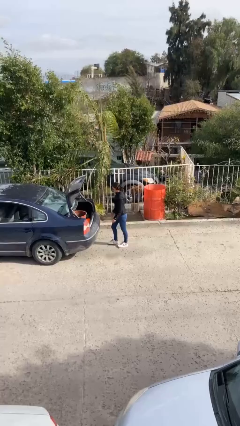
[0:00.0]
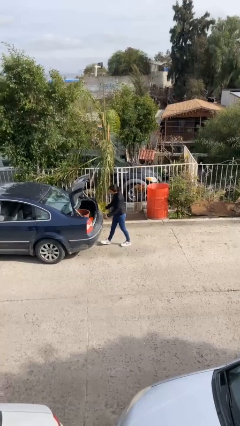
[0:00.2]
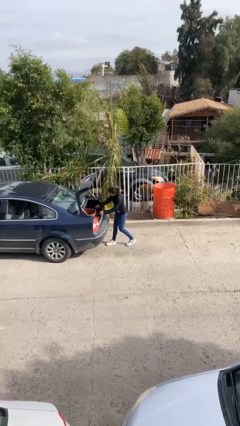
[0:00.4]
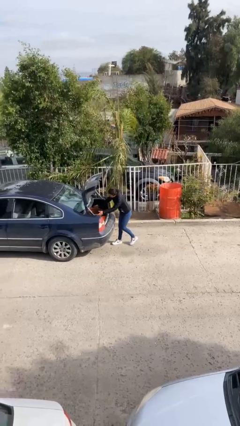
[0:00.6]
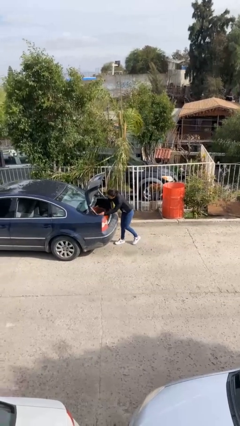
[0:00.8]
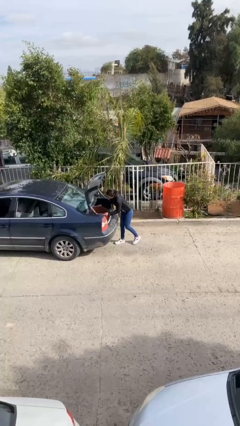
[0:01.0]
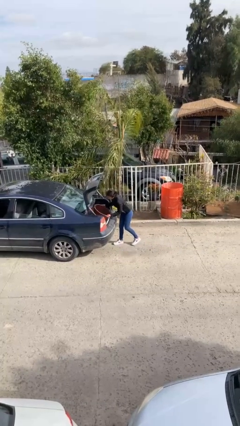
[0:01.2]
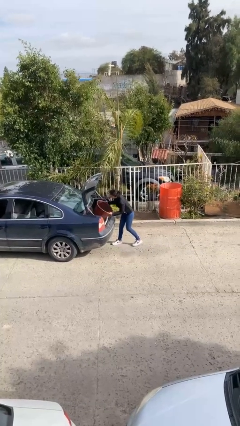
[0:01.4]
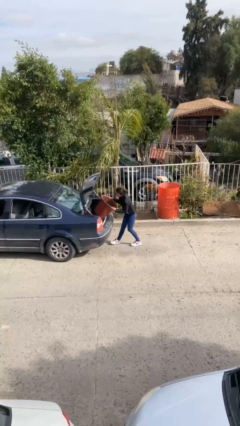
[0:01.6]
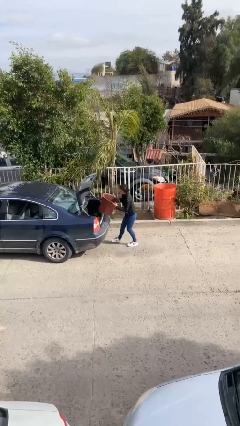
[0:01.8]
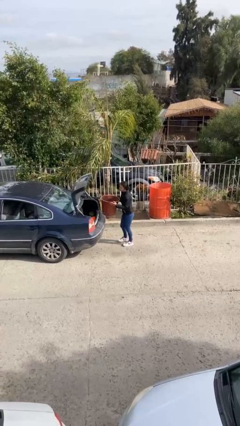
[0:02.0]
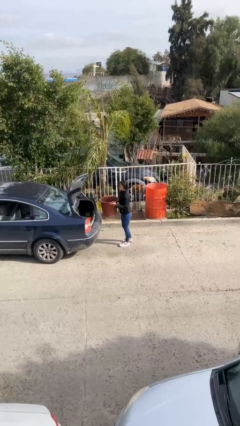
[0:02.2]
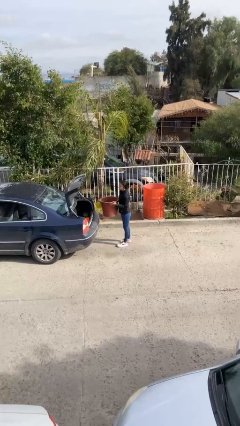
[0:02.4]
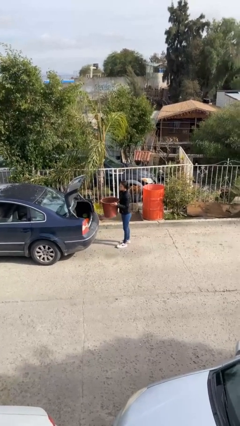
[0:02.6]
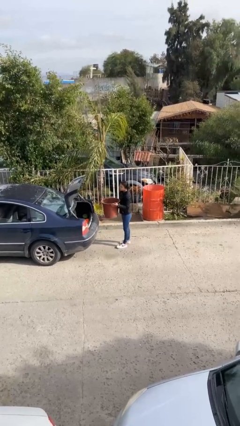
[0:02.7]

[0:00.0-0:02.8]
person unloads car

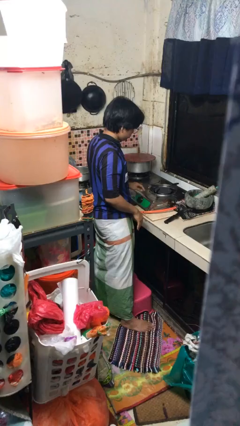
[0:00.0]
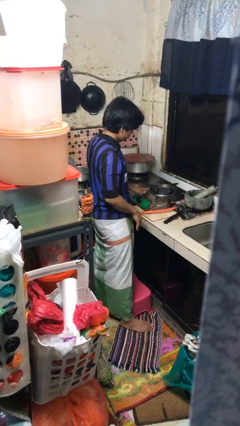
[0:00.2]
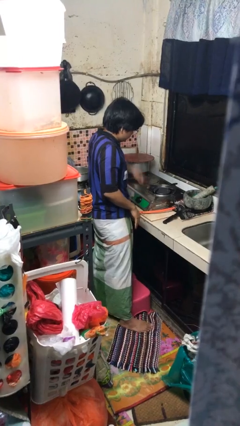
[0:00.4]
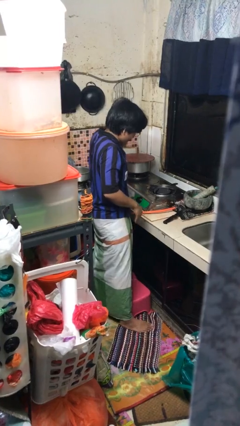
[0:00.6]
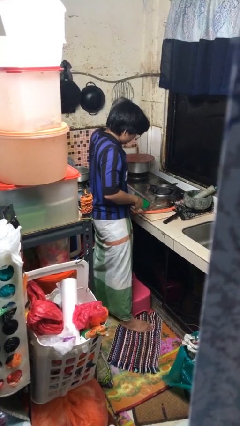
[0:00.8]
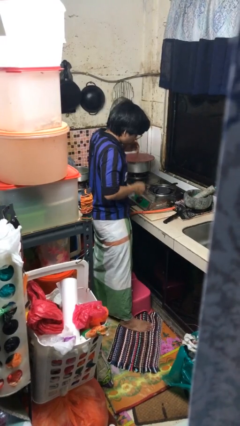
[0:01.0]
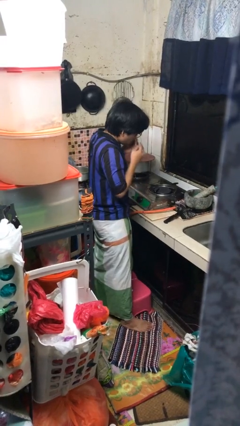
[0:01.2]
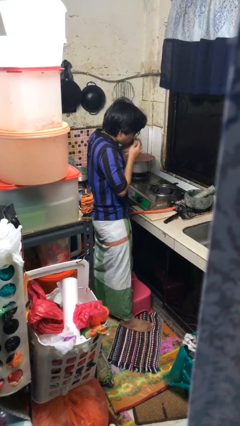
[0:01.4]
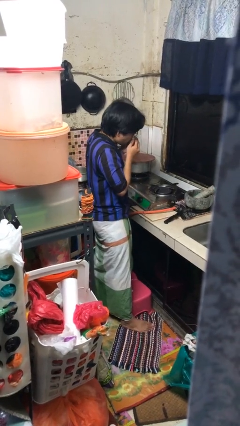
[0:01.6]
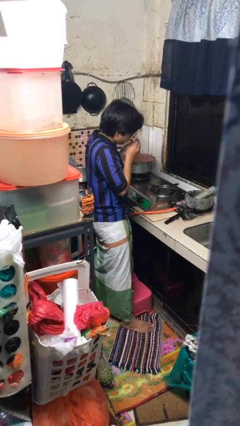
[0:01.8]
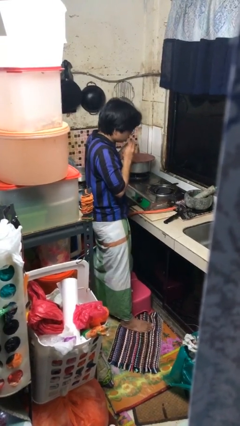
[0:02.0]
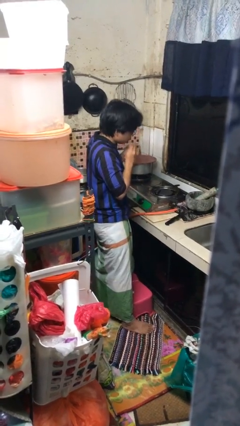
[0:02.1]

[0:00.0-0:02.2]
person burns hand

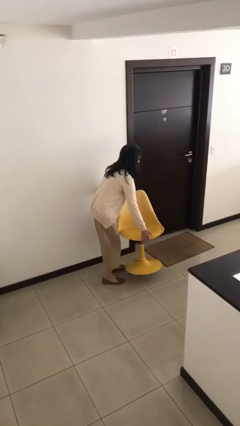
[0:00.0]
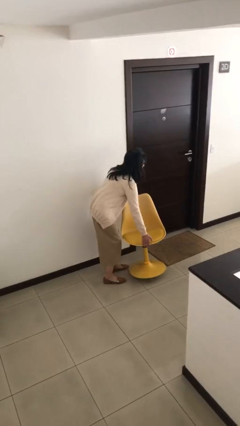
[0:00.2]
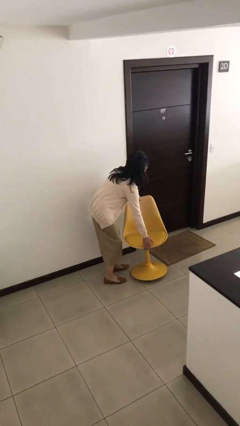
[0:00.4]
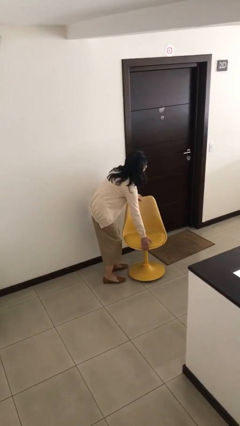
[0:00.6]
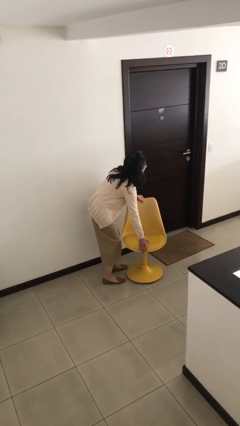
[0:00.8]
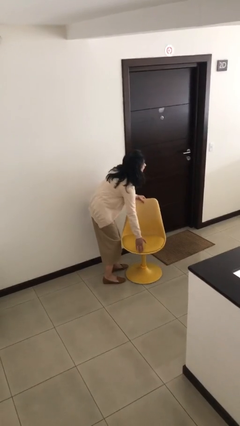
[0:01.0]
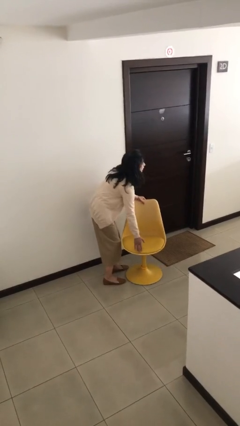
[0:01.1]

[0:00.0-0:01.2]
person puts down object on floor

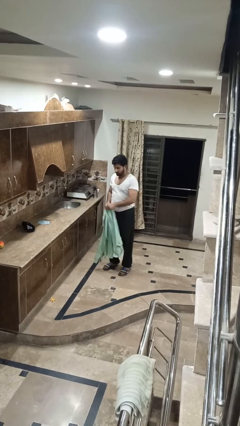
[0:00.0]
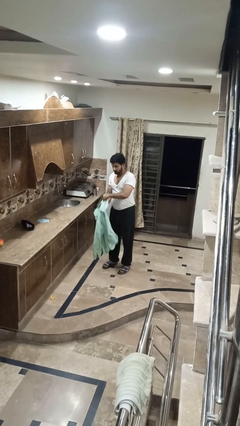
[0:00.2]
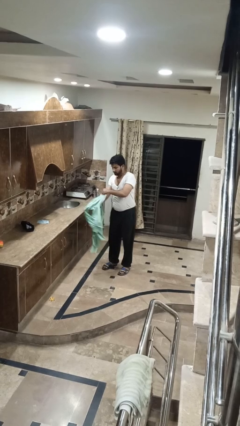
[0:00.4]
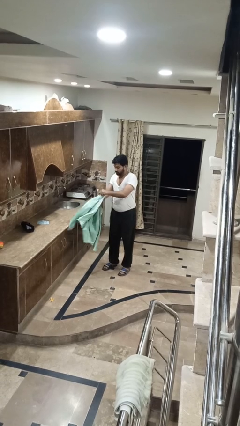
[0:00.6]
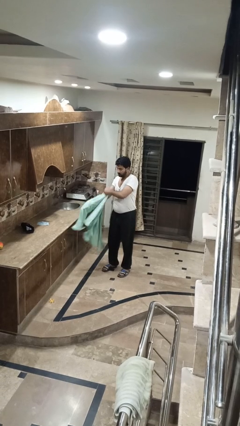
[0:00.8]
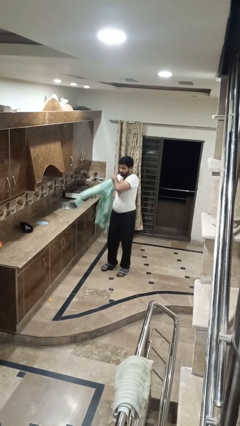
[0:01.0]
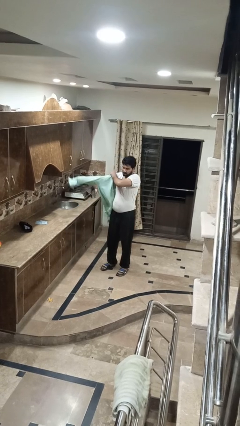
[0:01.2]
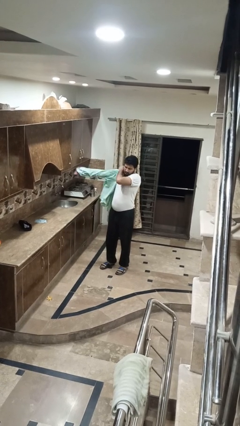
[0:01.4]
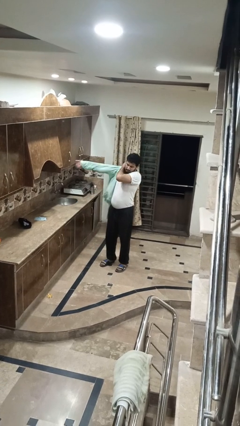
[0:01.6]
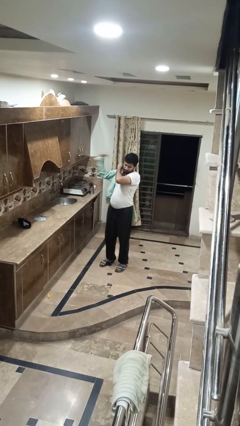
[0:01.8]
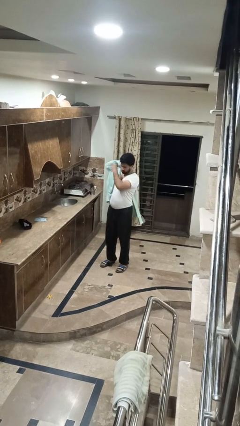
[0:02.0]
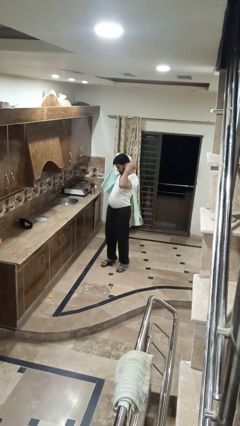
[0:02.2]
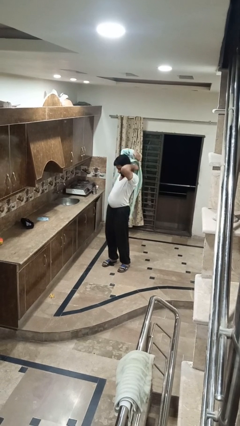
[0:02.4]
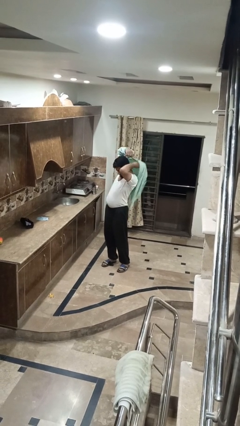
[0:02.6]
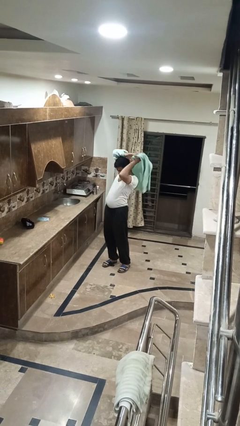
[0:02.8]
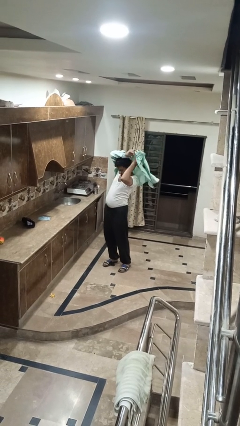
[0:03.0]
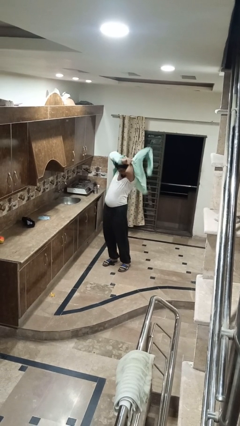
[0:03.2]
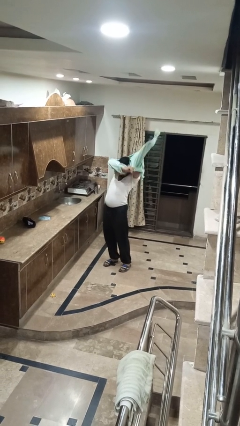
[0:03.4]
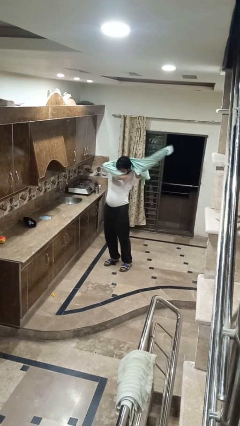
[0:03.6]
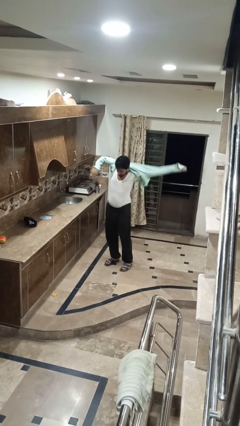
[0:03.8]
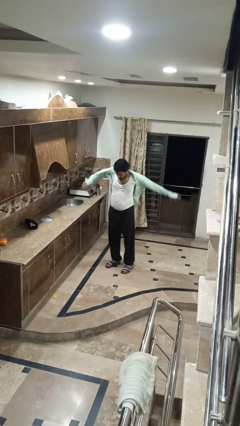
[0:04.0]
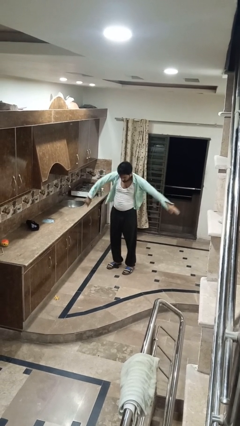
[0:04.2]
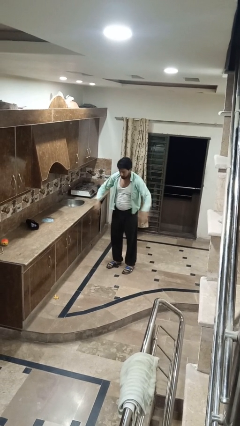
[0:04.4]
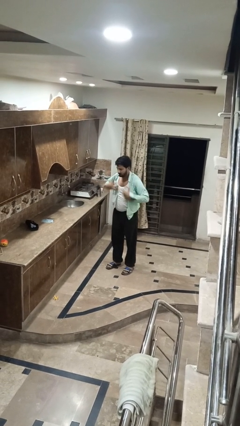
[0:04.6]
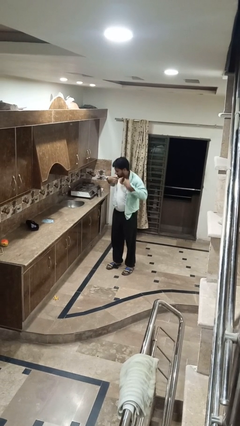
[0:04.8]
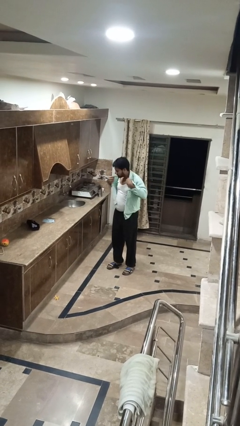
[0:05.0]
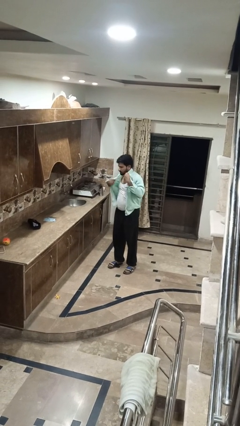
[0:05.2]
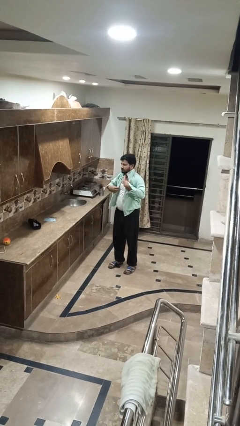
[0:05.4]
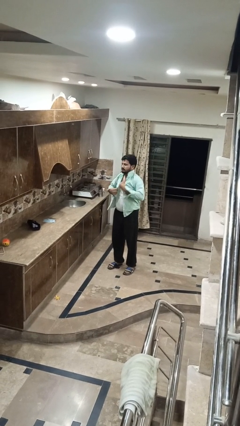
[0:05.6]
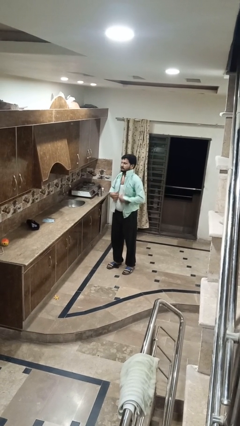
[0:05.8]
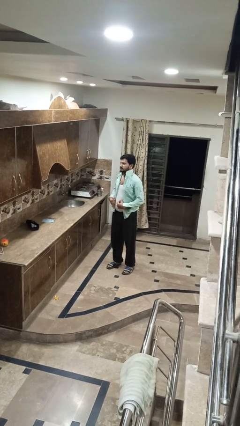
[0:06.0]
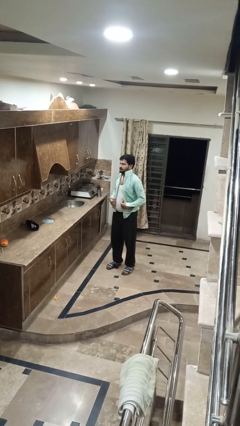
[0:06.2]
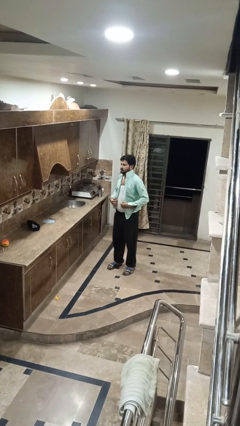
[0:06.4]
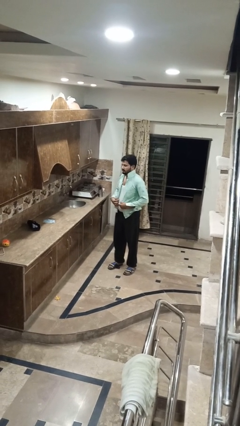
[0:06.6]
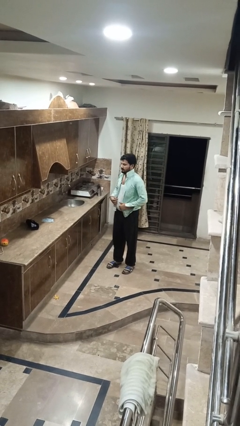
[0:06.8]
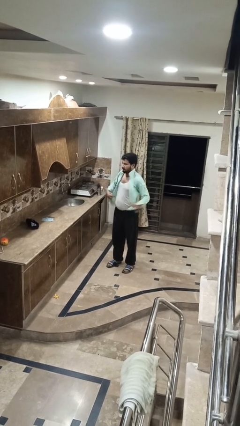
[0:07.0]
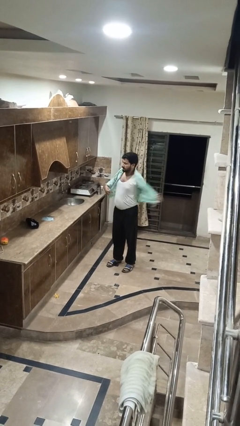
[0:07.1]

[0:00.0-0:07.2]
person puts on shirt

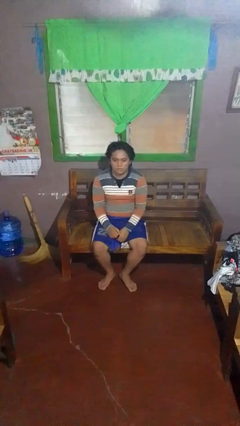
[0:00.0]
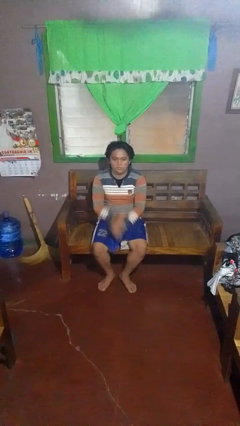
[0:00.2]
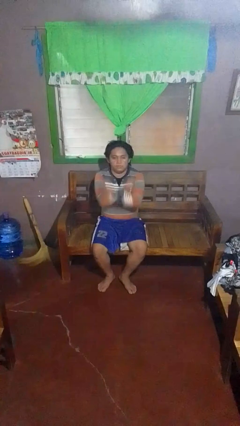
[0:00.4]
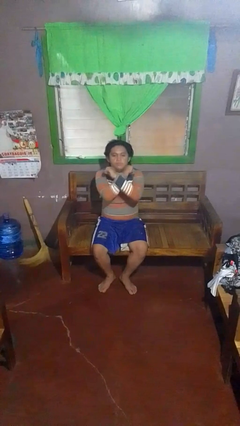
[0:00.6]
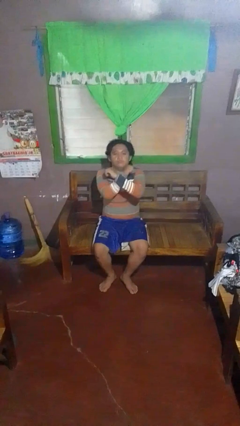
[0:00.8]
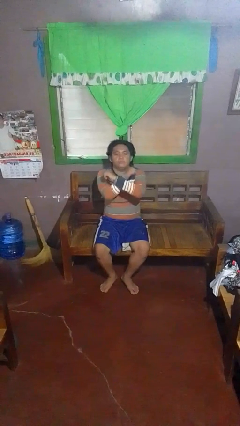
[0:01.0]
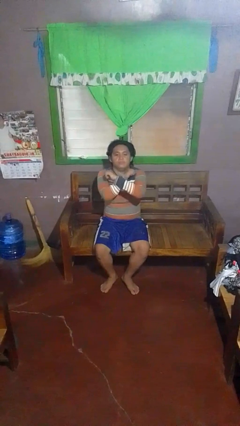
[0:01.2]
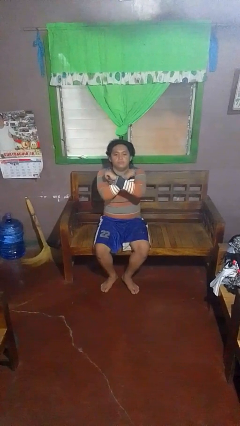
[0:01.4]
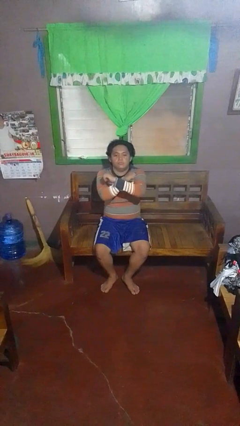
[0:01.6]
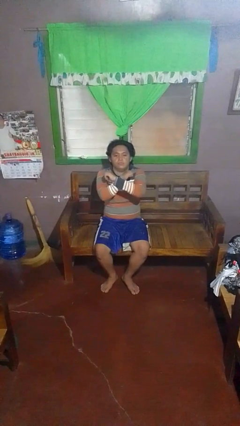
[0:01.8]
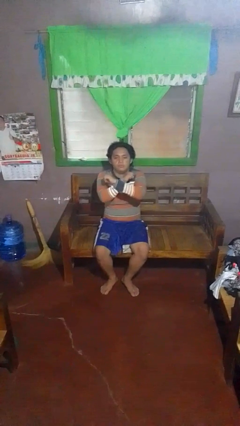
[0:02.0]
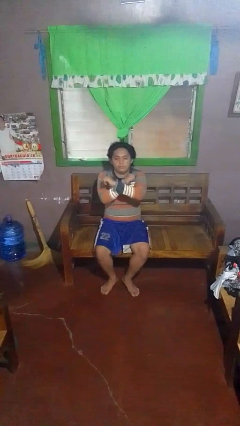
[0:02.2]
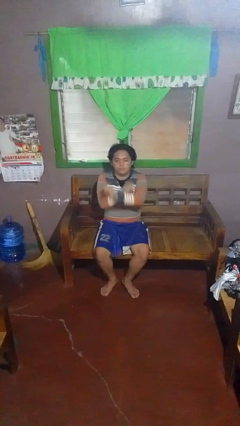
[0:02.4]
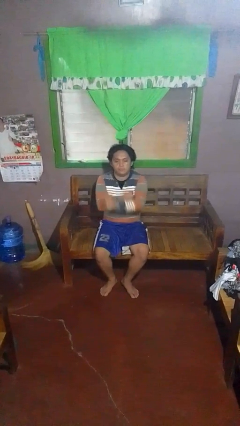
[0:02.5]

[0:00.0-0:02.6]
person gestures arms x

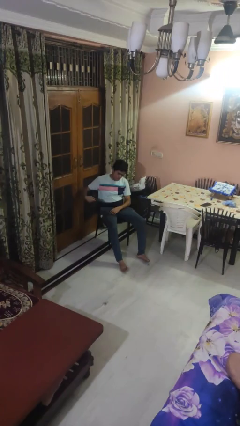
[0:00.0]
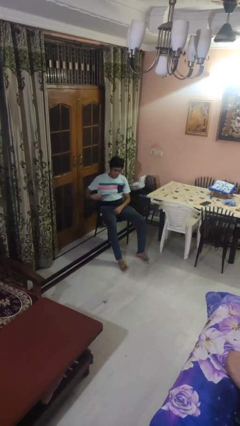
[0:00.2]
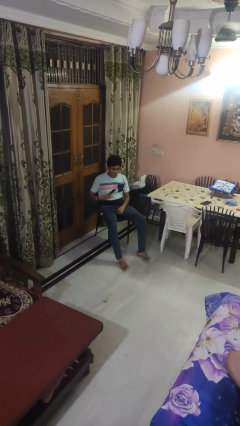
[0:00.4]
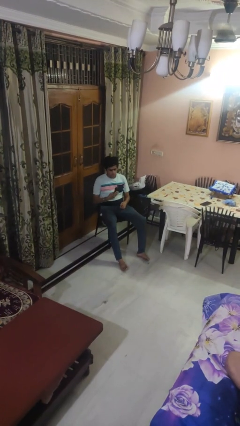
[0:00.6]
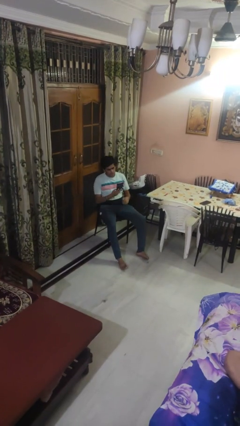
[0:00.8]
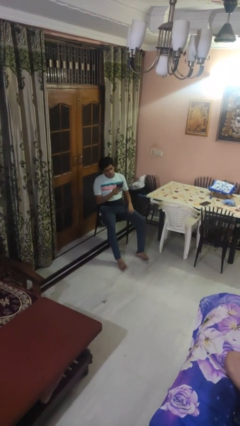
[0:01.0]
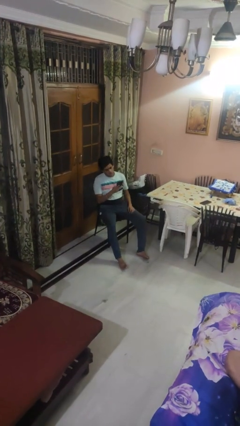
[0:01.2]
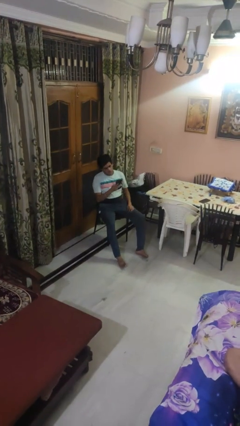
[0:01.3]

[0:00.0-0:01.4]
person takes phone from pocket
